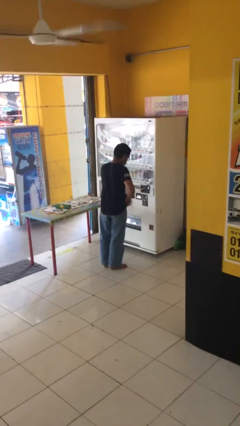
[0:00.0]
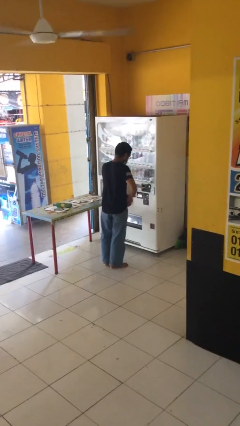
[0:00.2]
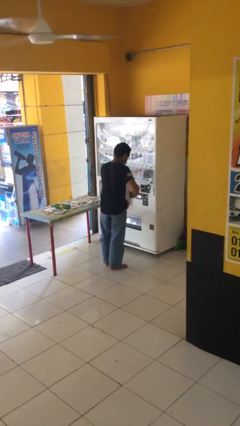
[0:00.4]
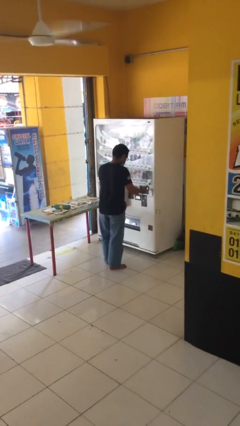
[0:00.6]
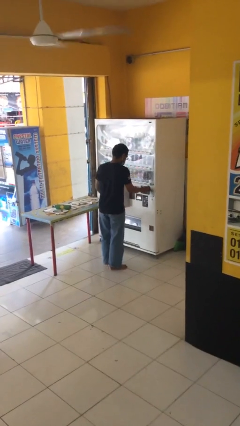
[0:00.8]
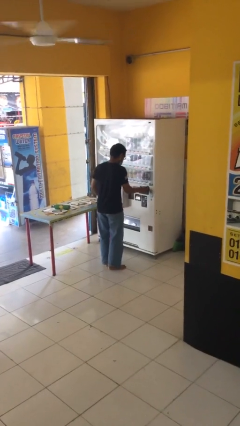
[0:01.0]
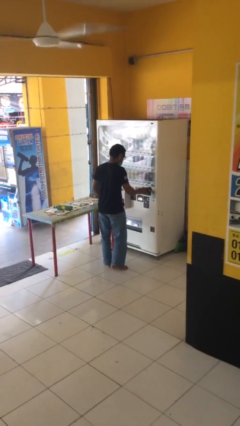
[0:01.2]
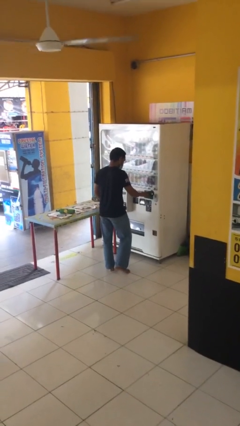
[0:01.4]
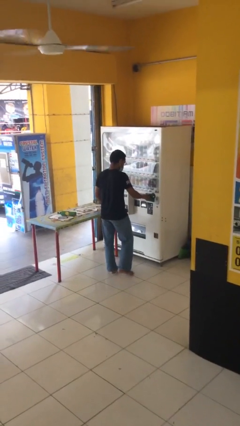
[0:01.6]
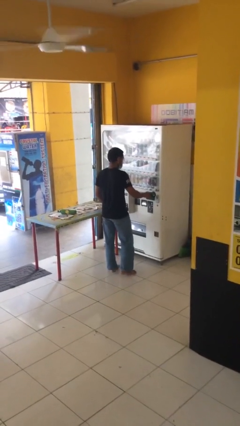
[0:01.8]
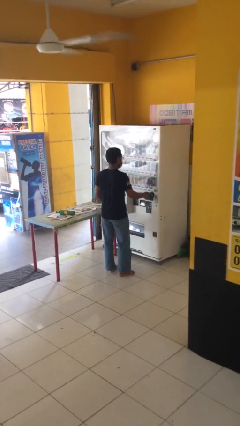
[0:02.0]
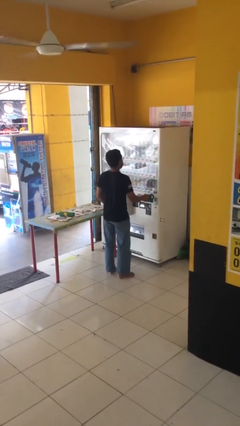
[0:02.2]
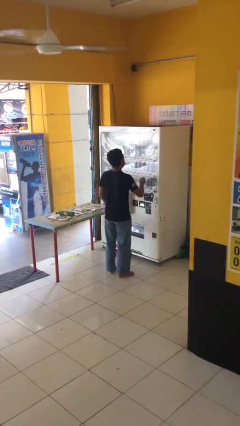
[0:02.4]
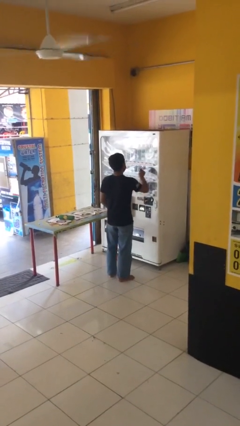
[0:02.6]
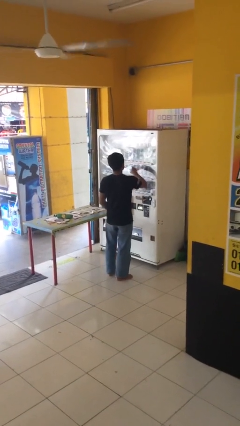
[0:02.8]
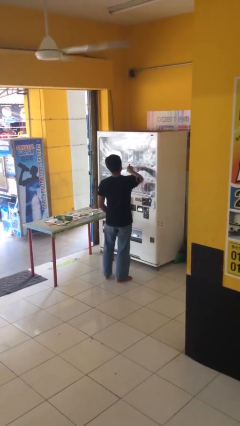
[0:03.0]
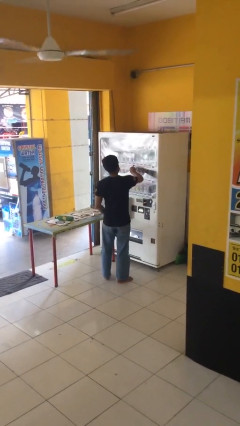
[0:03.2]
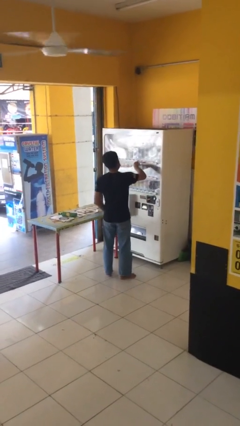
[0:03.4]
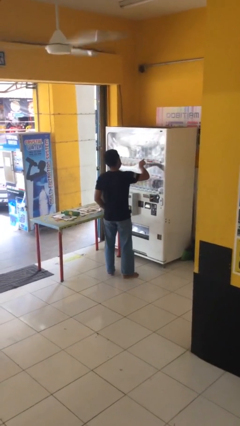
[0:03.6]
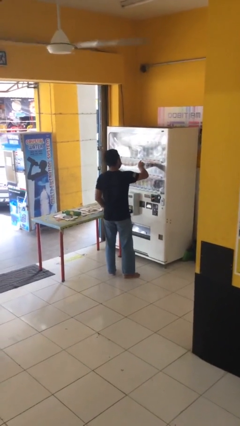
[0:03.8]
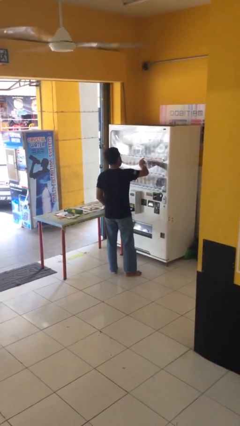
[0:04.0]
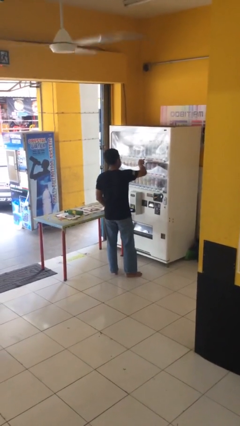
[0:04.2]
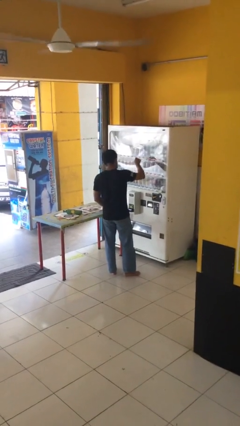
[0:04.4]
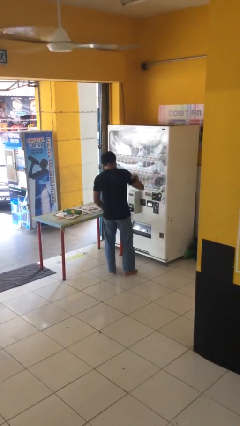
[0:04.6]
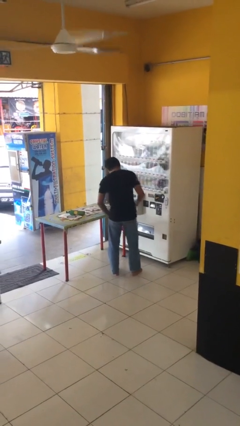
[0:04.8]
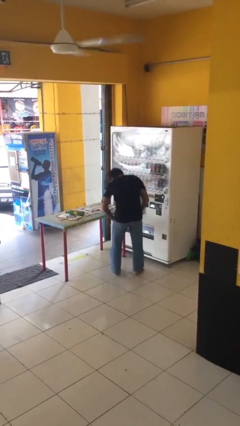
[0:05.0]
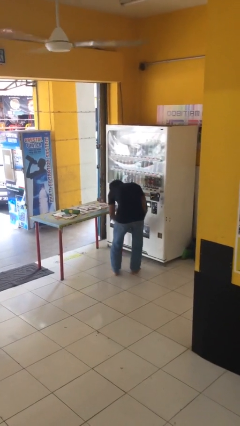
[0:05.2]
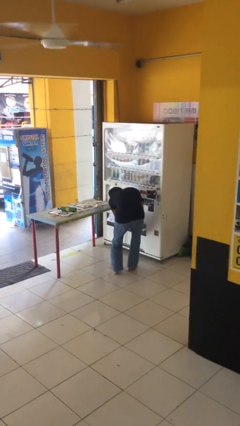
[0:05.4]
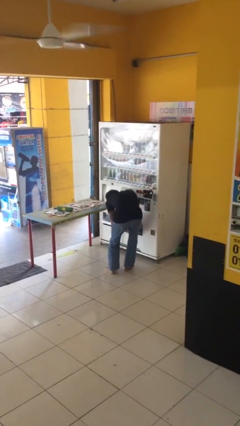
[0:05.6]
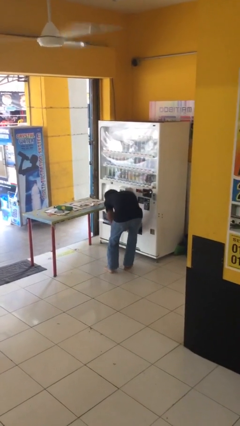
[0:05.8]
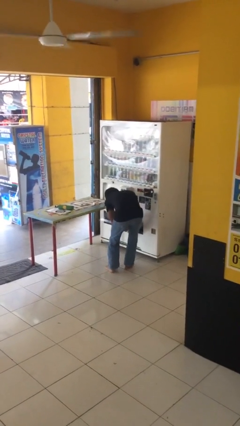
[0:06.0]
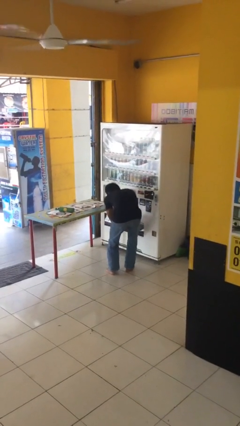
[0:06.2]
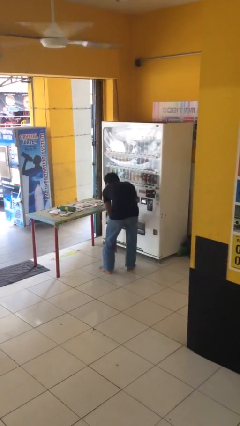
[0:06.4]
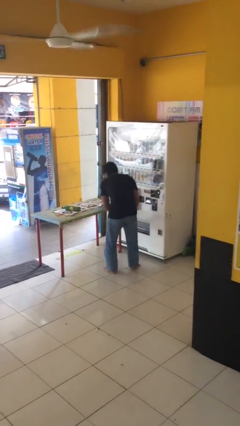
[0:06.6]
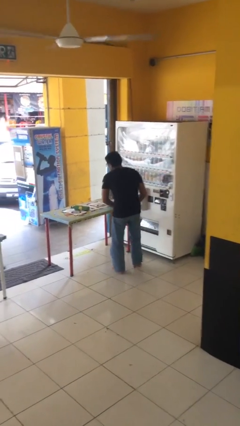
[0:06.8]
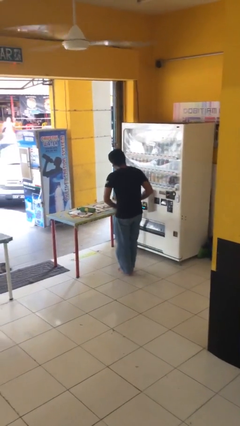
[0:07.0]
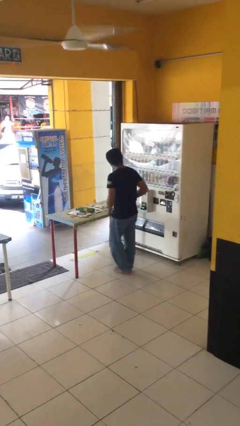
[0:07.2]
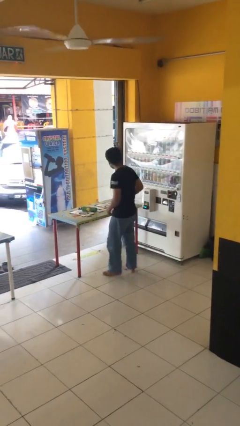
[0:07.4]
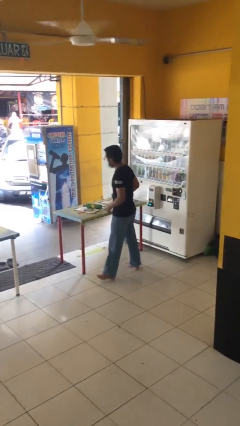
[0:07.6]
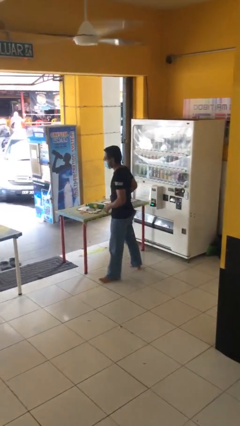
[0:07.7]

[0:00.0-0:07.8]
person purchases from machine

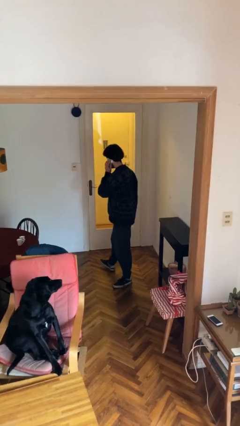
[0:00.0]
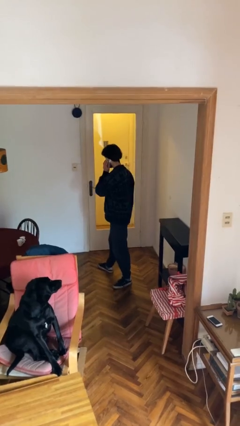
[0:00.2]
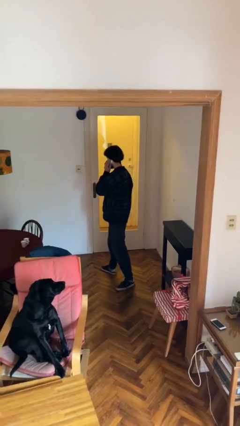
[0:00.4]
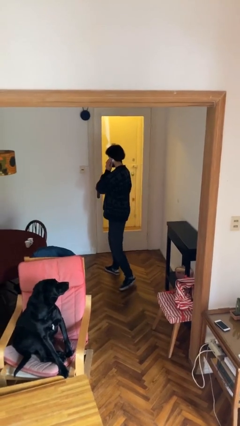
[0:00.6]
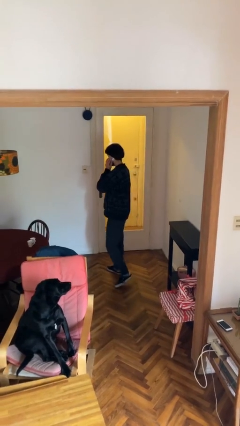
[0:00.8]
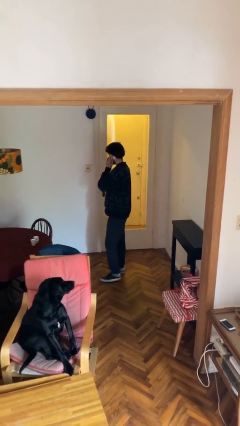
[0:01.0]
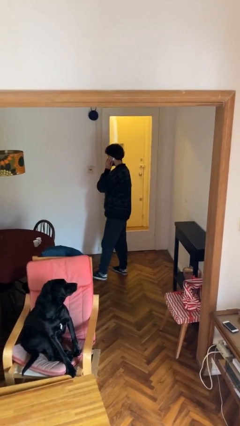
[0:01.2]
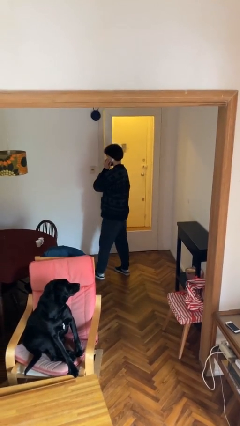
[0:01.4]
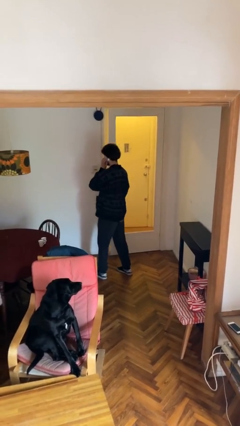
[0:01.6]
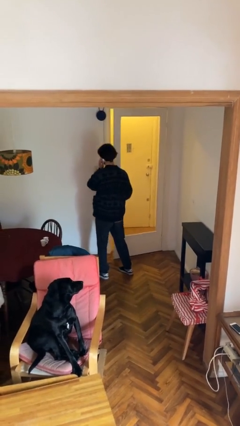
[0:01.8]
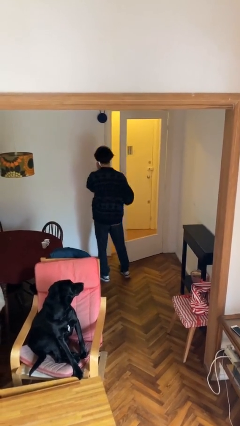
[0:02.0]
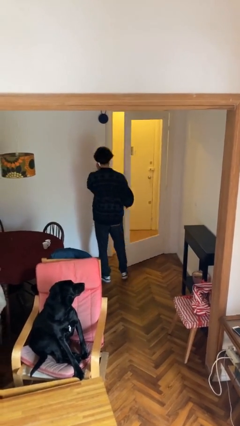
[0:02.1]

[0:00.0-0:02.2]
person opens facility door

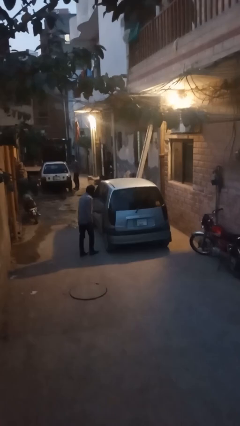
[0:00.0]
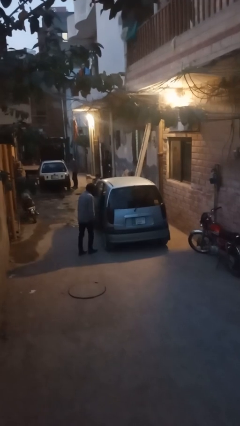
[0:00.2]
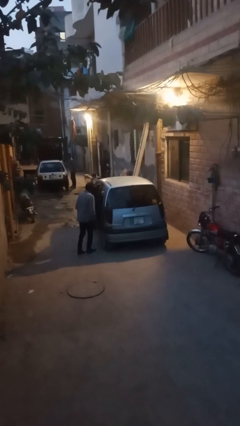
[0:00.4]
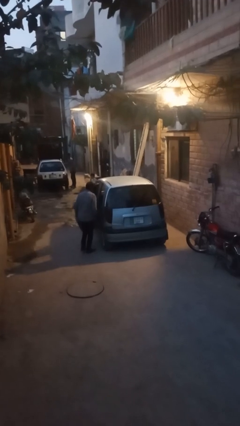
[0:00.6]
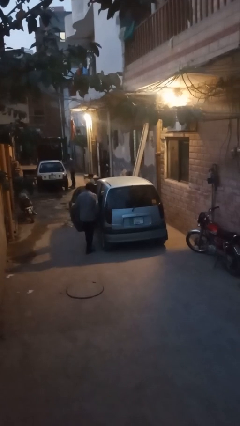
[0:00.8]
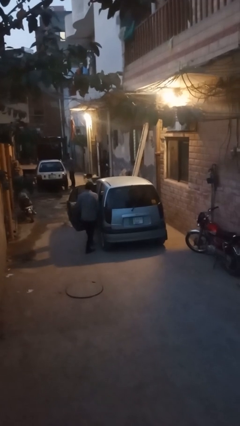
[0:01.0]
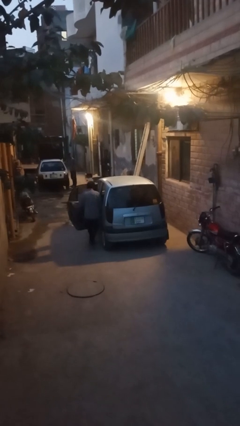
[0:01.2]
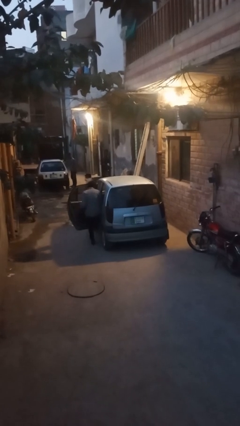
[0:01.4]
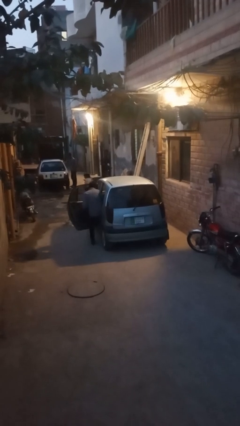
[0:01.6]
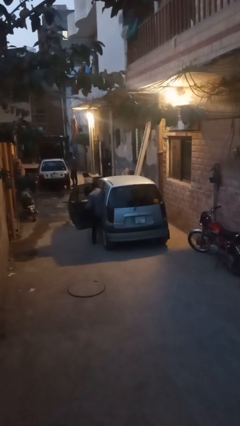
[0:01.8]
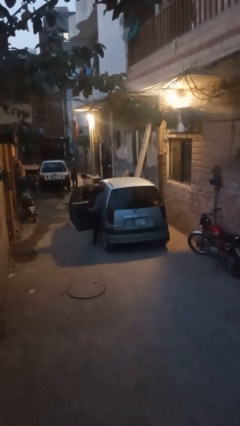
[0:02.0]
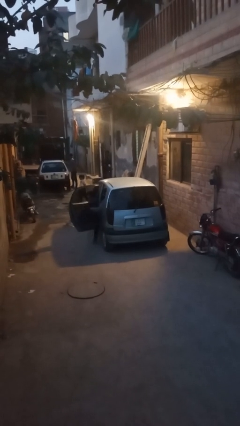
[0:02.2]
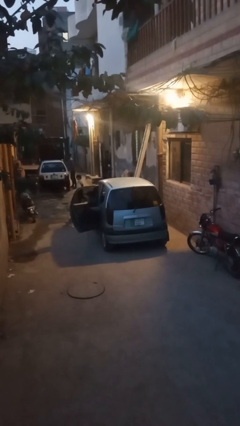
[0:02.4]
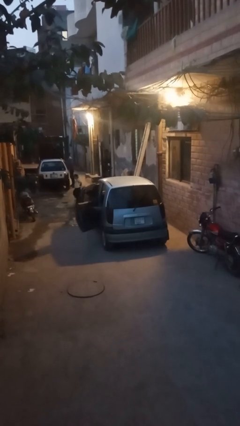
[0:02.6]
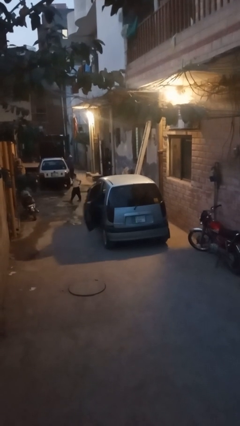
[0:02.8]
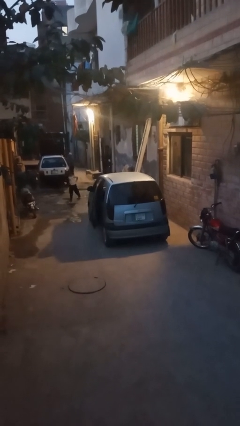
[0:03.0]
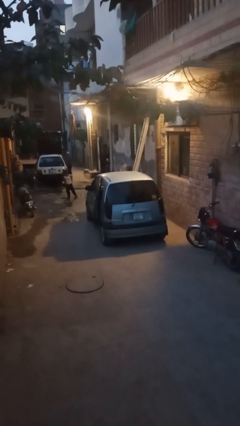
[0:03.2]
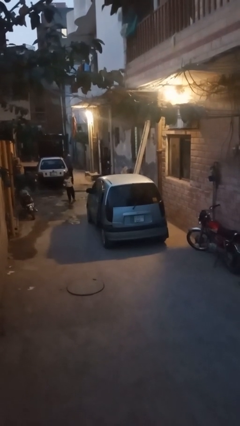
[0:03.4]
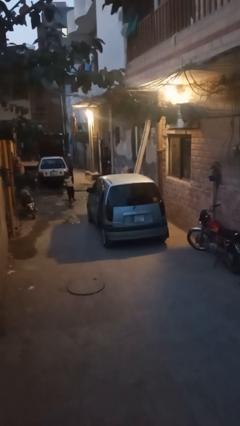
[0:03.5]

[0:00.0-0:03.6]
car picks up person

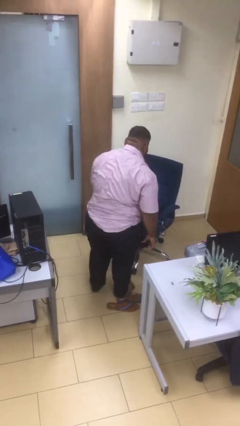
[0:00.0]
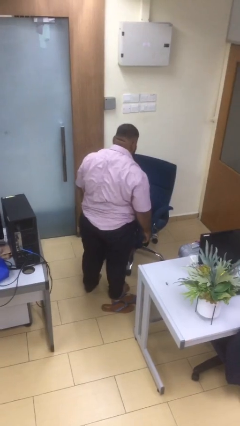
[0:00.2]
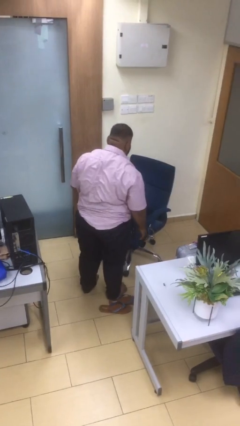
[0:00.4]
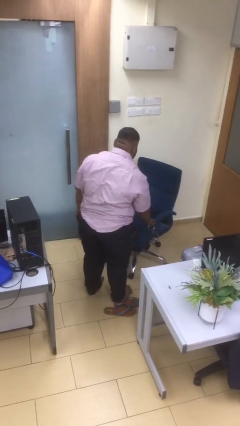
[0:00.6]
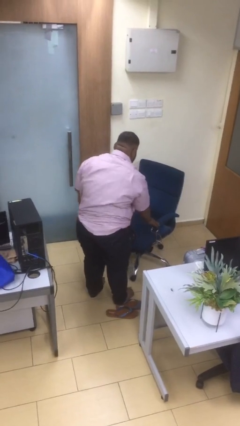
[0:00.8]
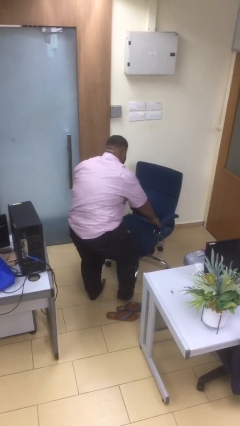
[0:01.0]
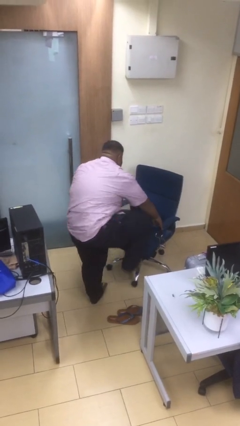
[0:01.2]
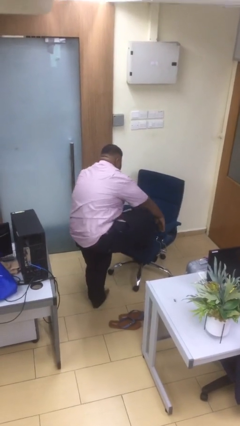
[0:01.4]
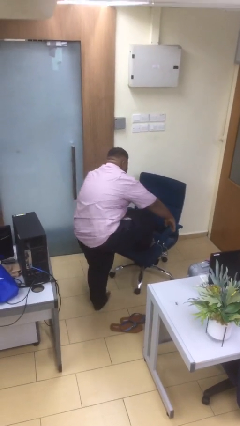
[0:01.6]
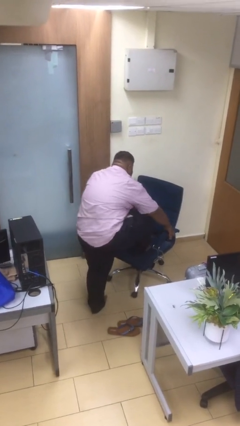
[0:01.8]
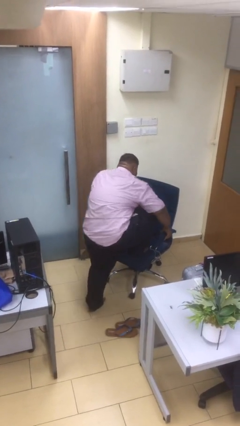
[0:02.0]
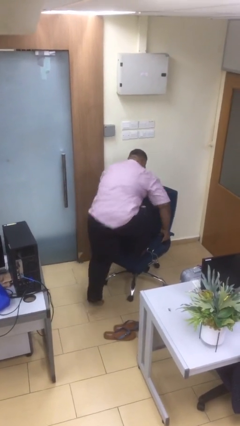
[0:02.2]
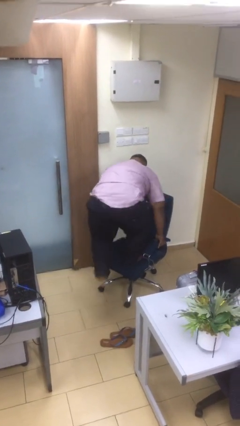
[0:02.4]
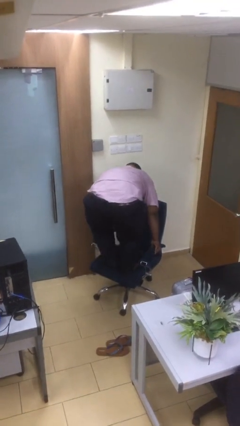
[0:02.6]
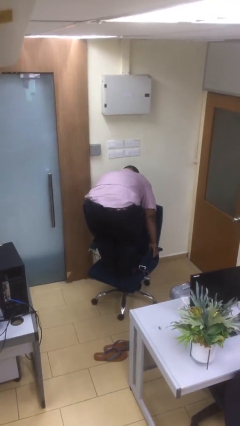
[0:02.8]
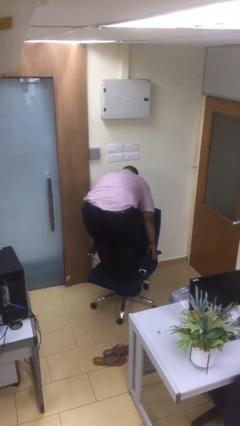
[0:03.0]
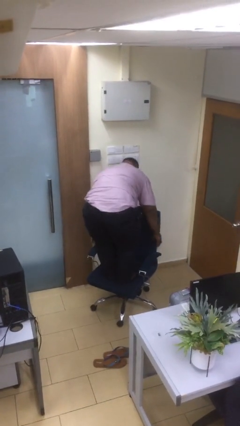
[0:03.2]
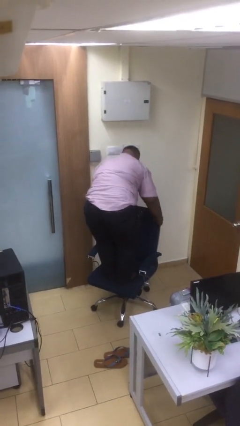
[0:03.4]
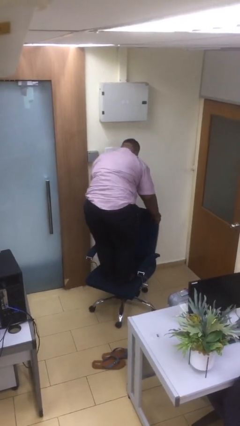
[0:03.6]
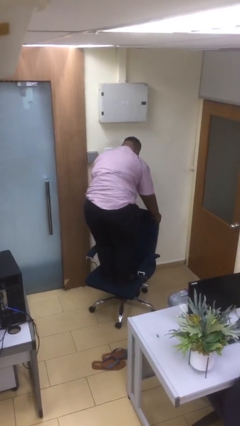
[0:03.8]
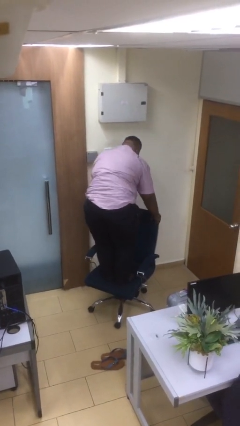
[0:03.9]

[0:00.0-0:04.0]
person climbs on chair

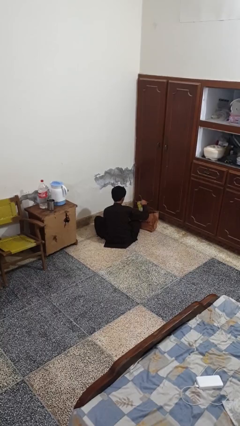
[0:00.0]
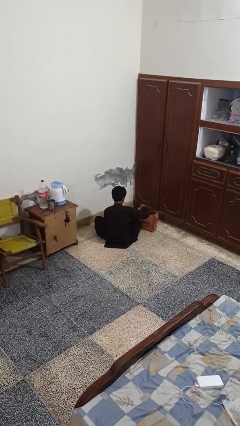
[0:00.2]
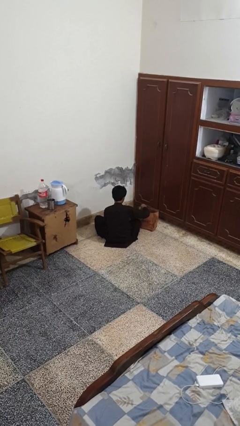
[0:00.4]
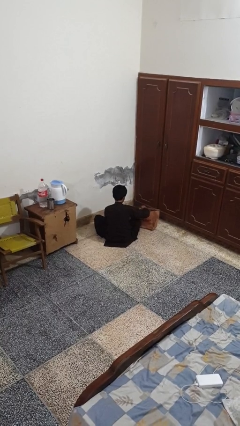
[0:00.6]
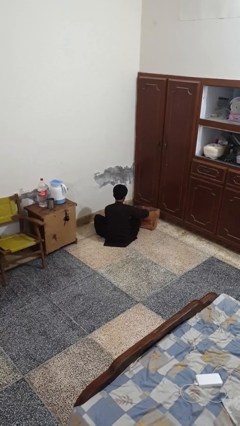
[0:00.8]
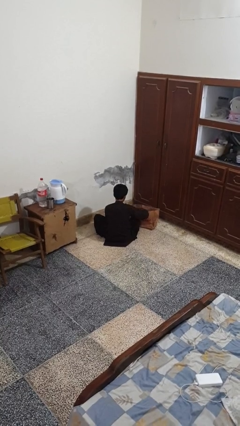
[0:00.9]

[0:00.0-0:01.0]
person puts object into bag
